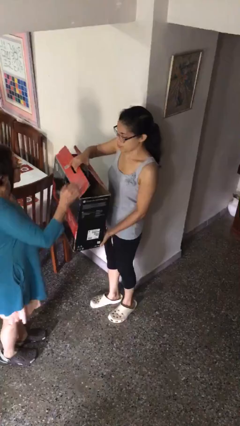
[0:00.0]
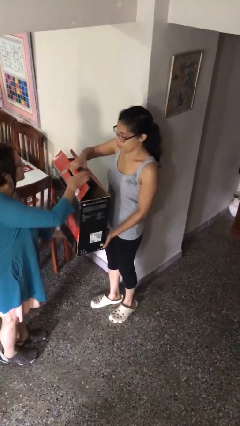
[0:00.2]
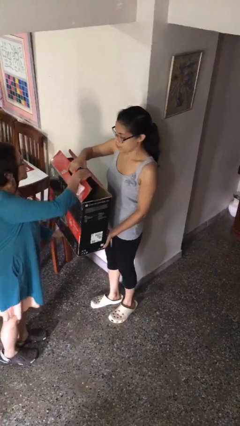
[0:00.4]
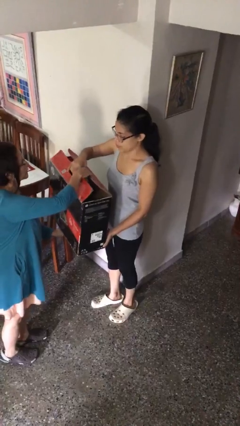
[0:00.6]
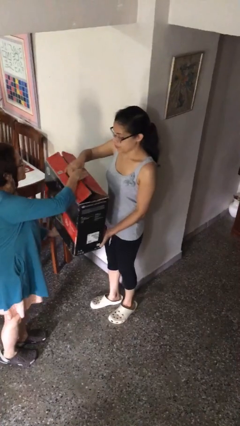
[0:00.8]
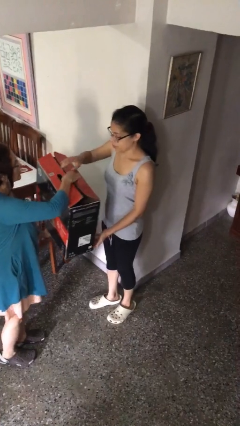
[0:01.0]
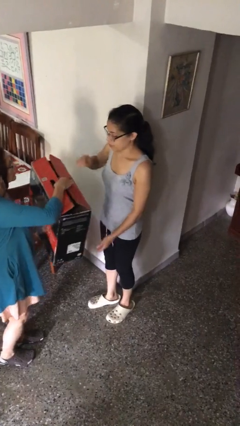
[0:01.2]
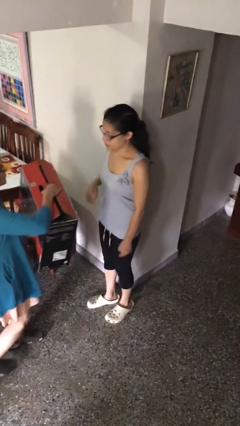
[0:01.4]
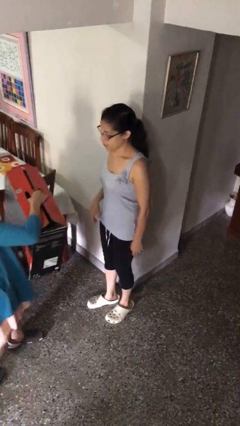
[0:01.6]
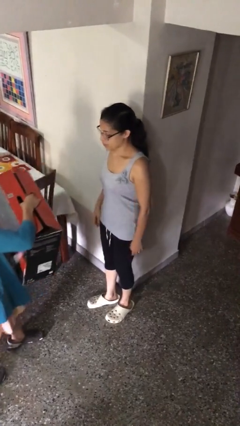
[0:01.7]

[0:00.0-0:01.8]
person transfers object to person

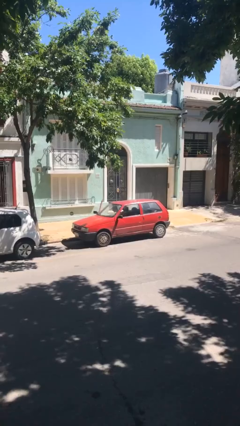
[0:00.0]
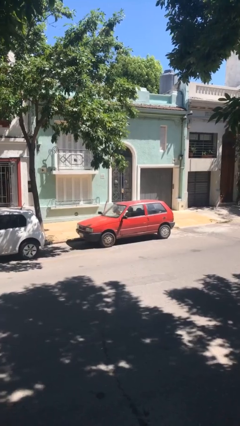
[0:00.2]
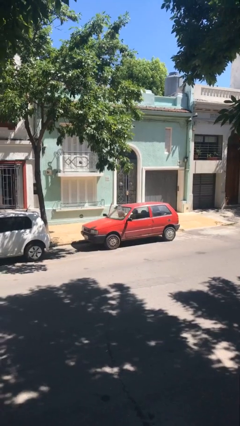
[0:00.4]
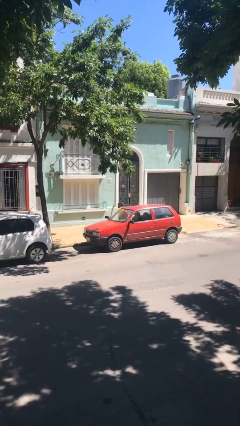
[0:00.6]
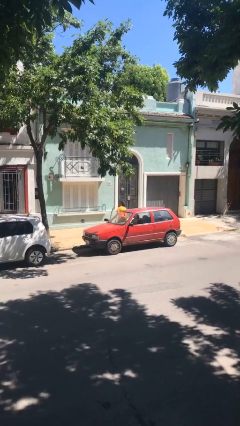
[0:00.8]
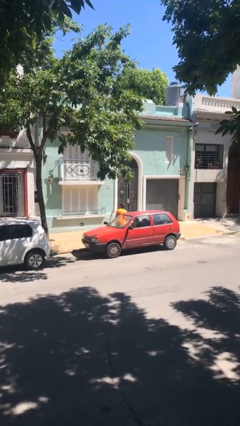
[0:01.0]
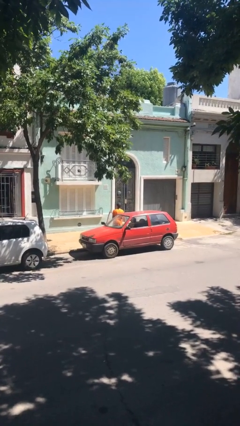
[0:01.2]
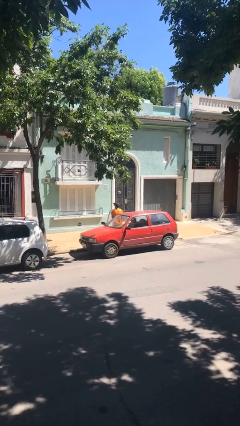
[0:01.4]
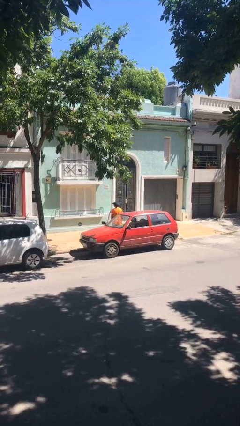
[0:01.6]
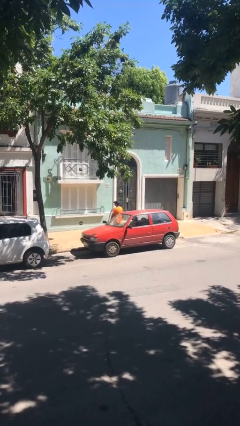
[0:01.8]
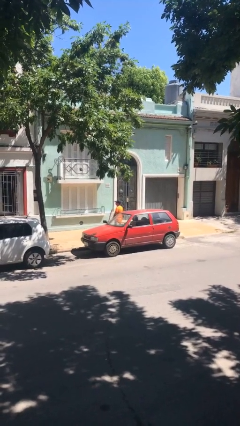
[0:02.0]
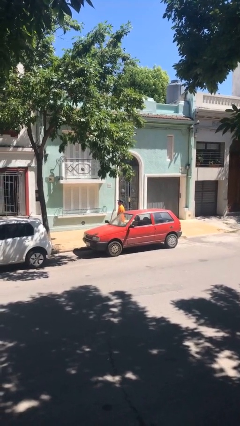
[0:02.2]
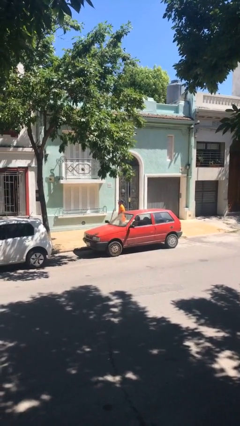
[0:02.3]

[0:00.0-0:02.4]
person exits car

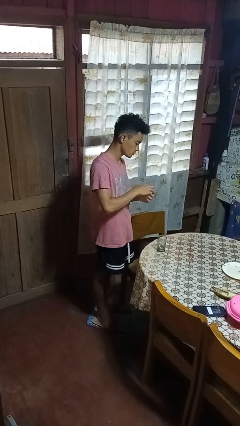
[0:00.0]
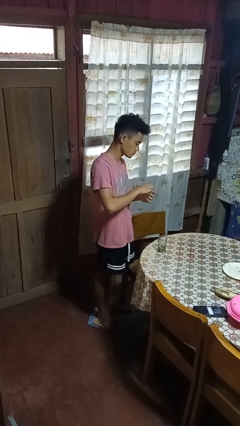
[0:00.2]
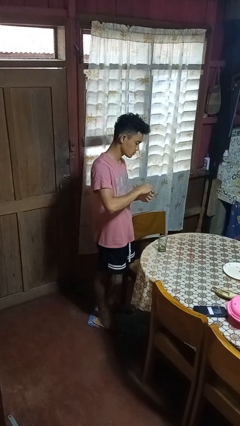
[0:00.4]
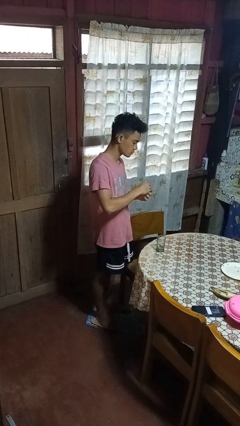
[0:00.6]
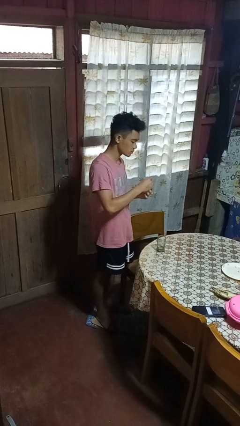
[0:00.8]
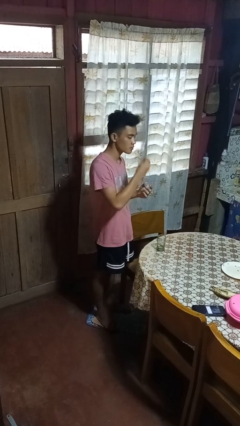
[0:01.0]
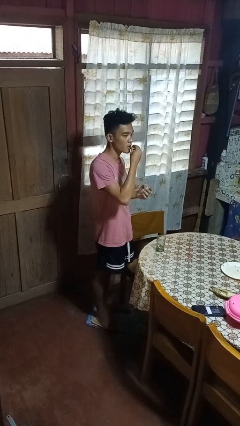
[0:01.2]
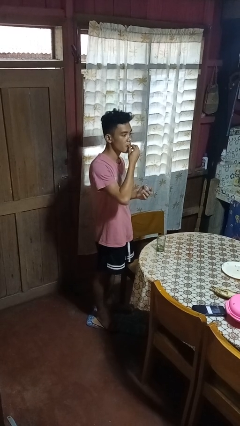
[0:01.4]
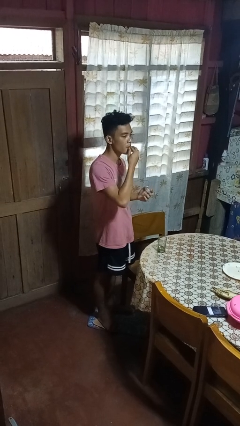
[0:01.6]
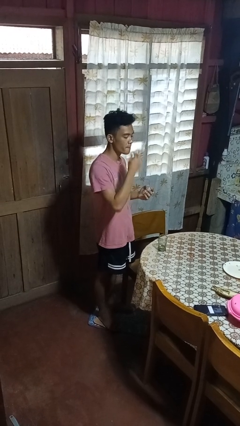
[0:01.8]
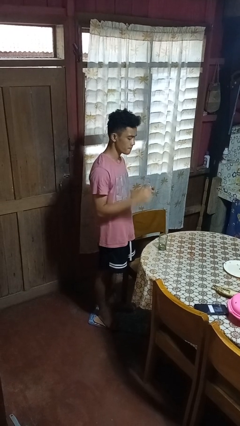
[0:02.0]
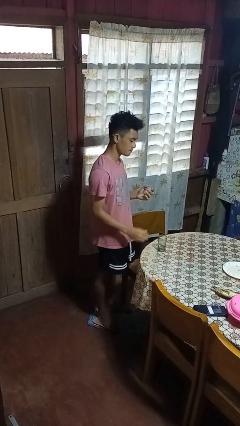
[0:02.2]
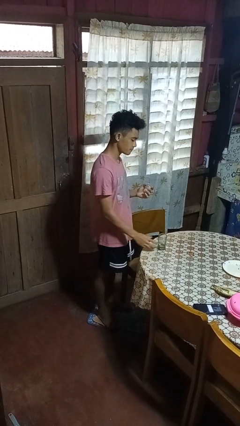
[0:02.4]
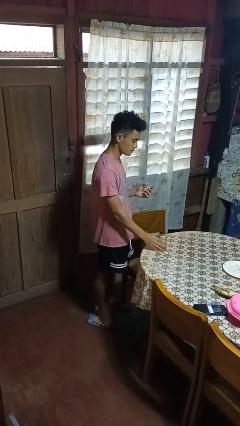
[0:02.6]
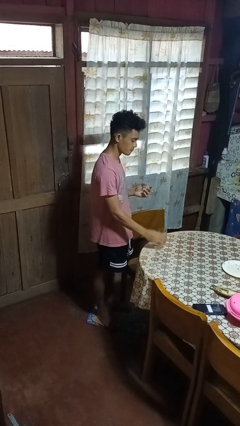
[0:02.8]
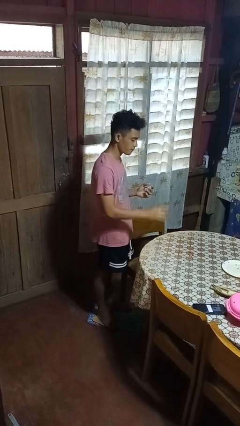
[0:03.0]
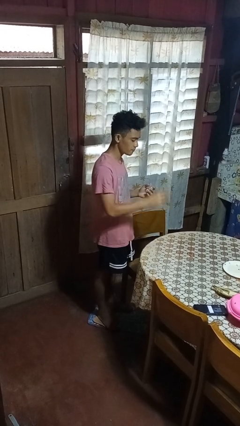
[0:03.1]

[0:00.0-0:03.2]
person takes medicine pills

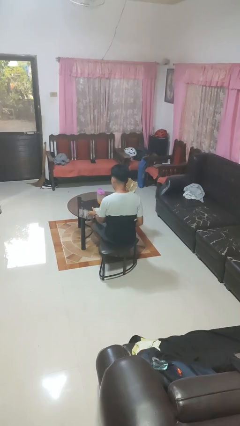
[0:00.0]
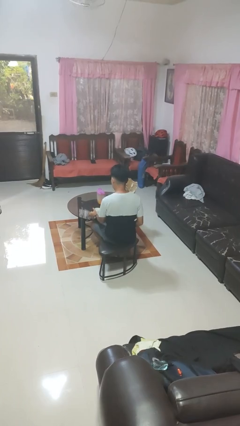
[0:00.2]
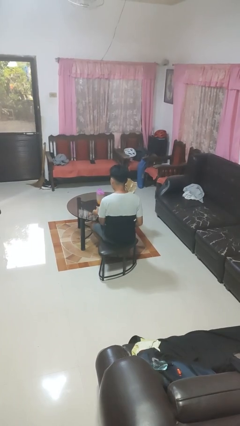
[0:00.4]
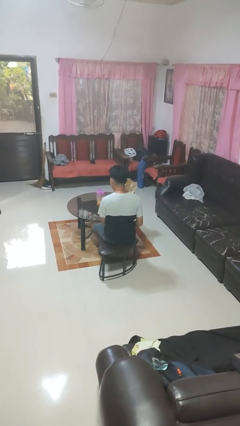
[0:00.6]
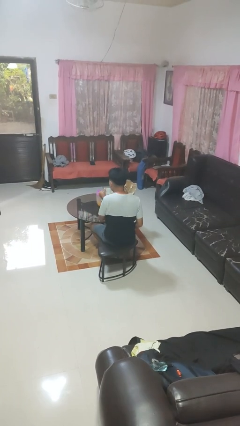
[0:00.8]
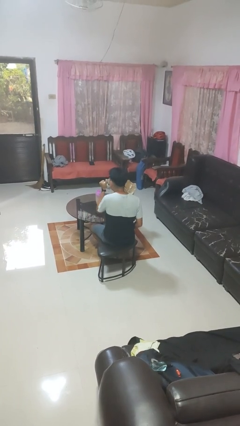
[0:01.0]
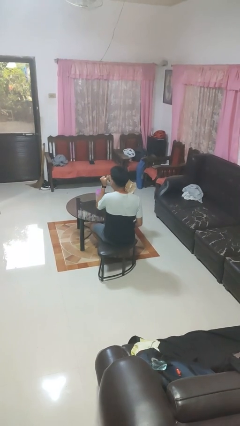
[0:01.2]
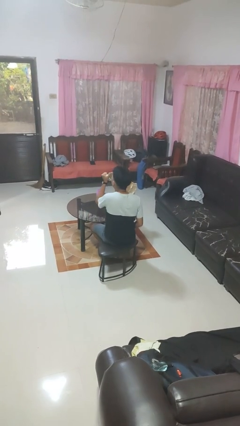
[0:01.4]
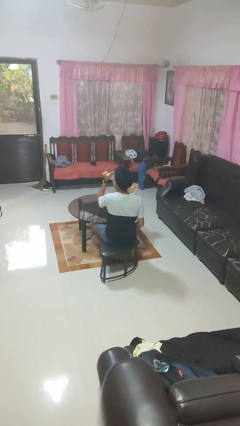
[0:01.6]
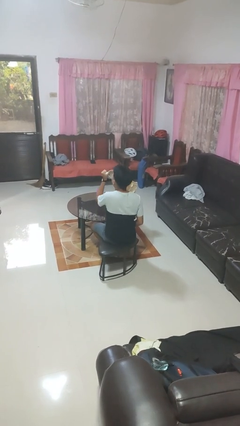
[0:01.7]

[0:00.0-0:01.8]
person drinks from mug

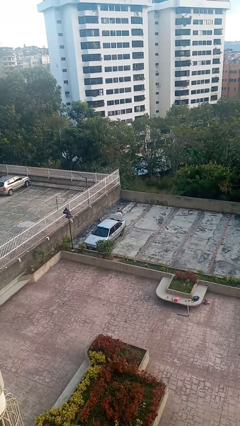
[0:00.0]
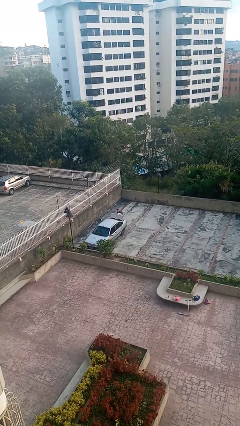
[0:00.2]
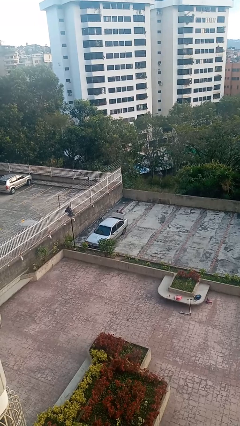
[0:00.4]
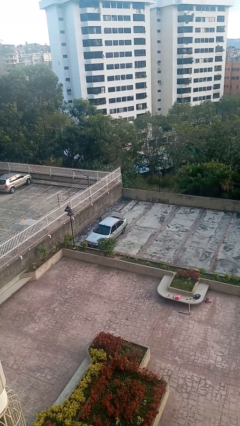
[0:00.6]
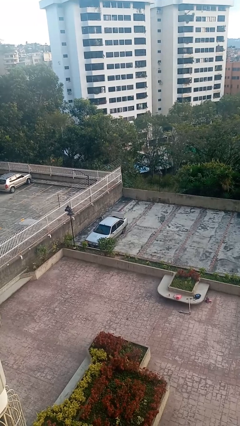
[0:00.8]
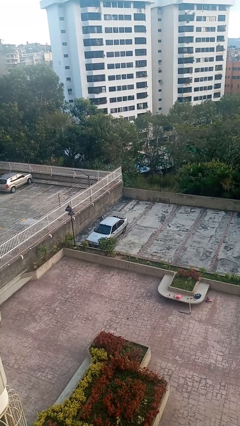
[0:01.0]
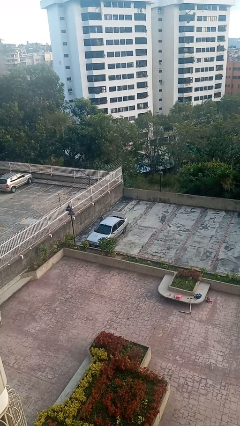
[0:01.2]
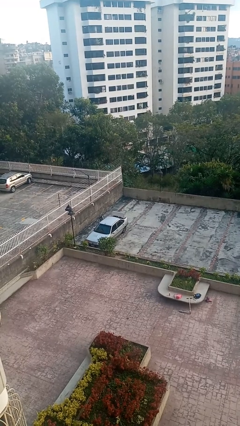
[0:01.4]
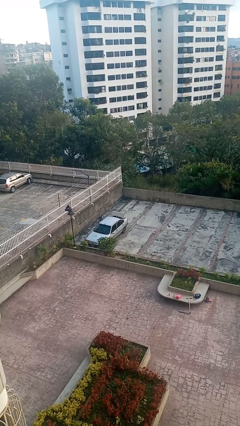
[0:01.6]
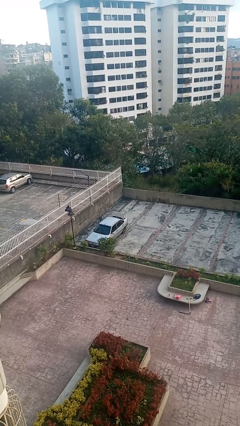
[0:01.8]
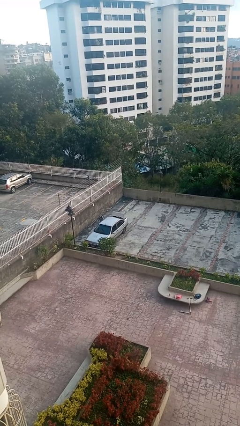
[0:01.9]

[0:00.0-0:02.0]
person loads car

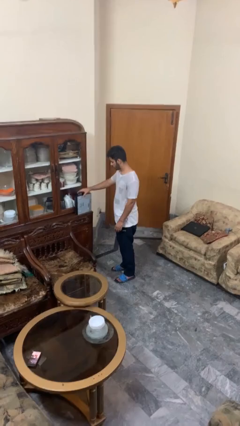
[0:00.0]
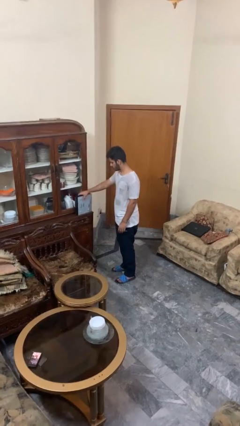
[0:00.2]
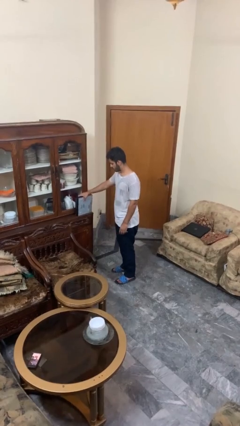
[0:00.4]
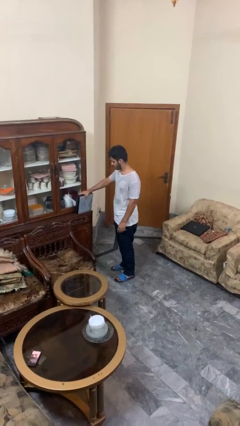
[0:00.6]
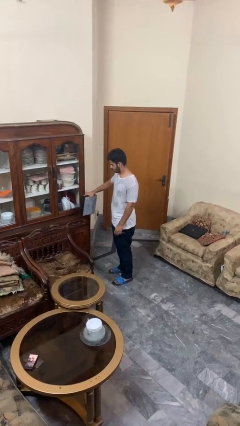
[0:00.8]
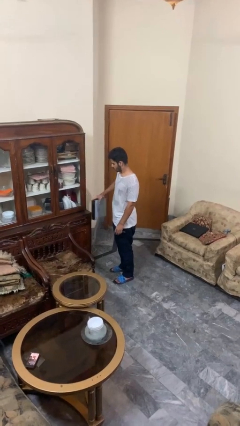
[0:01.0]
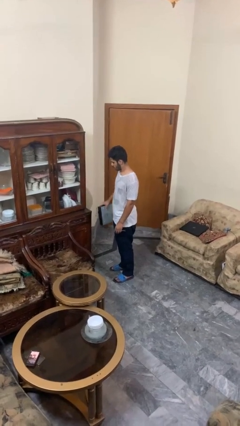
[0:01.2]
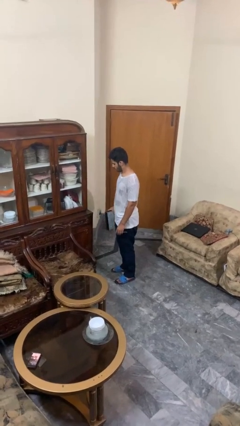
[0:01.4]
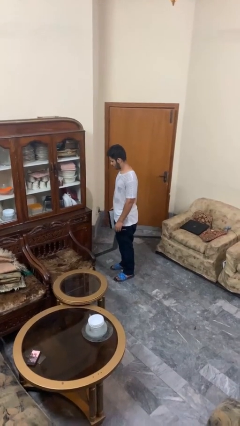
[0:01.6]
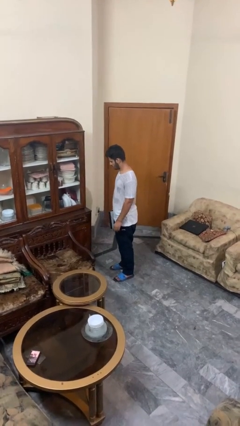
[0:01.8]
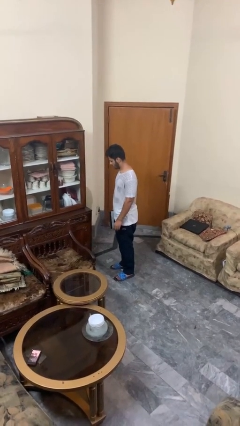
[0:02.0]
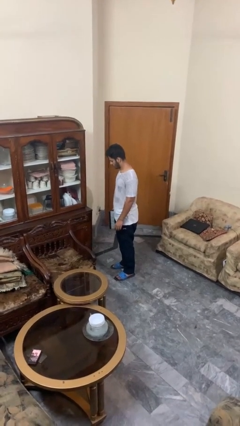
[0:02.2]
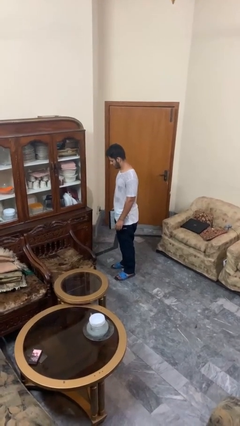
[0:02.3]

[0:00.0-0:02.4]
person picks up object from countertop

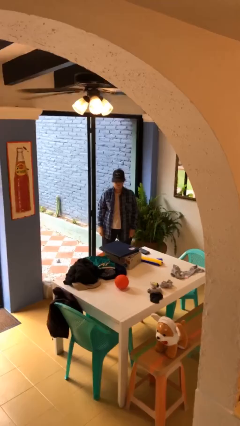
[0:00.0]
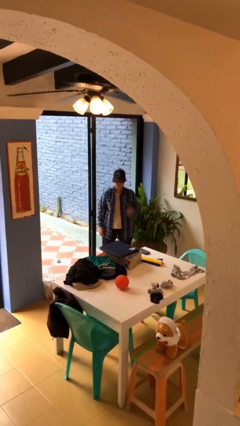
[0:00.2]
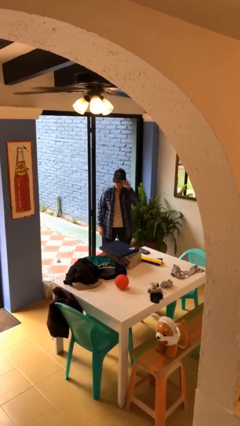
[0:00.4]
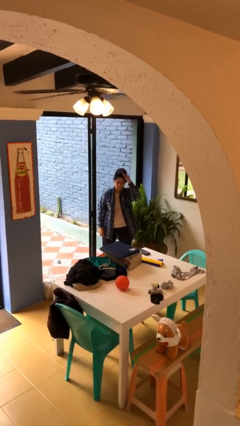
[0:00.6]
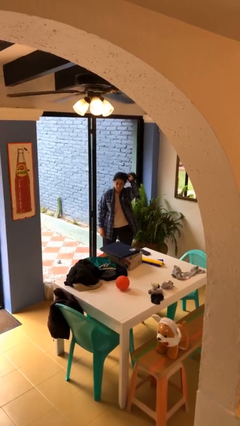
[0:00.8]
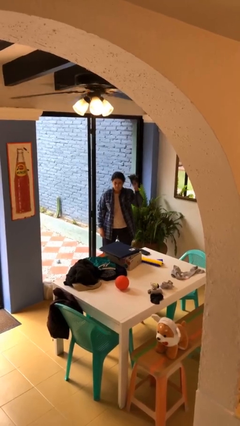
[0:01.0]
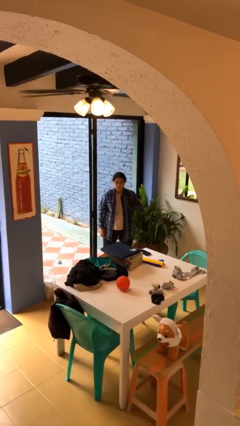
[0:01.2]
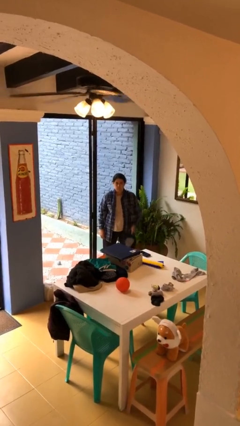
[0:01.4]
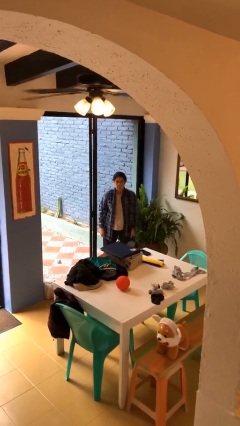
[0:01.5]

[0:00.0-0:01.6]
person takes off hat

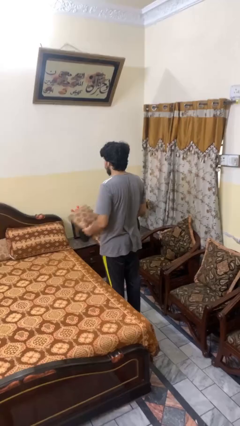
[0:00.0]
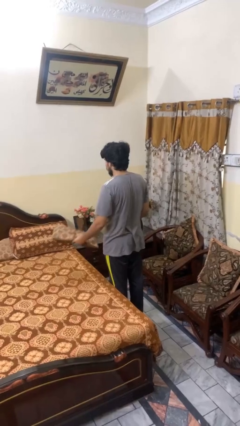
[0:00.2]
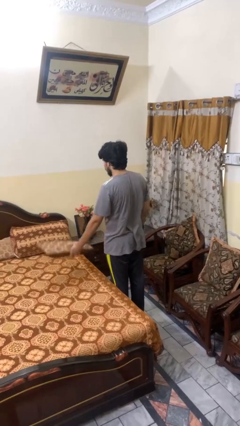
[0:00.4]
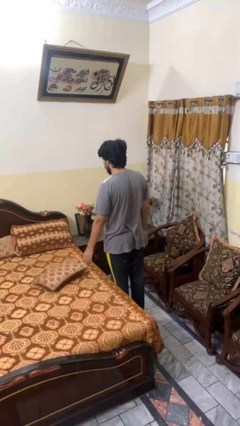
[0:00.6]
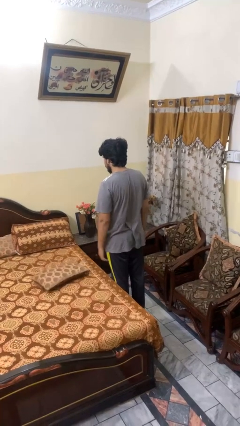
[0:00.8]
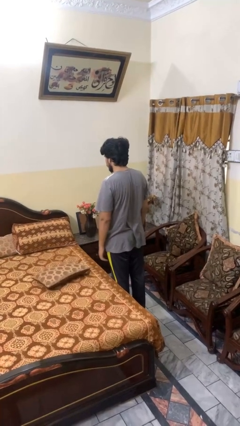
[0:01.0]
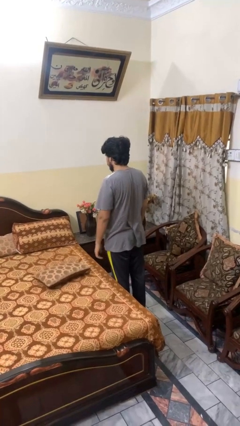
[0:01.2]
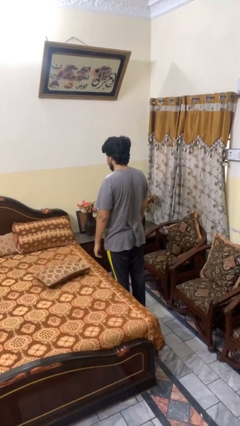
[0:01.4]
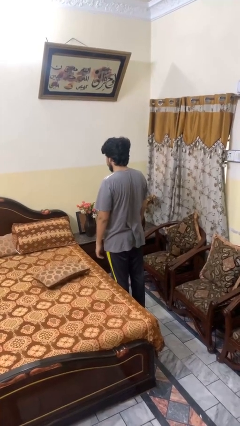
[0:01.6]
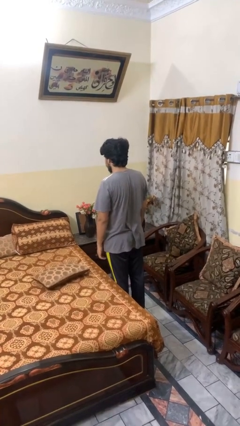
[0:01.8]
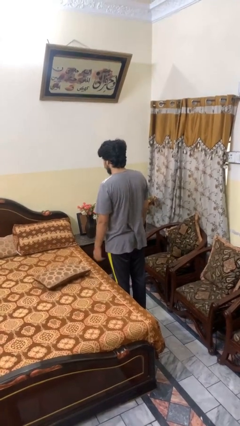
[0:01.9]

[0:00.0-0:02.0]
person puts down object on bed
